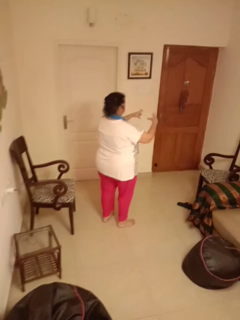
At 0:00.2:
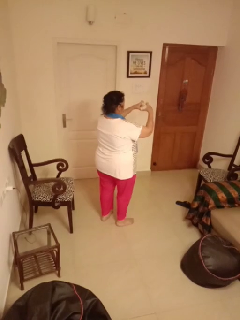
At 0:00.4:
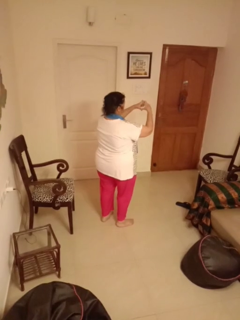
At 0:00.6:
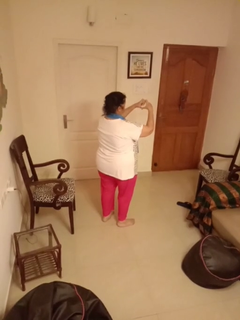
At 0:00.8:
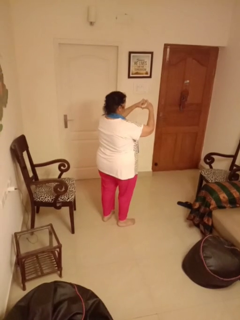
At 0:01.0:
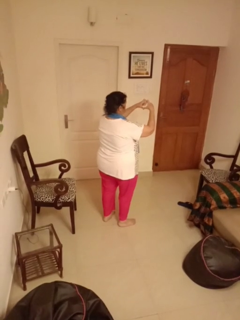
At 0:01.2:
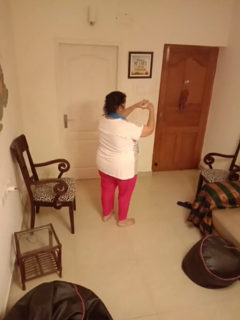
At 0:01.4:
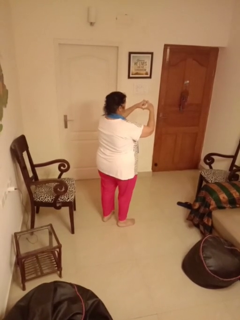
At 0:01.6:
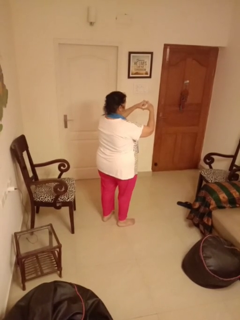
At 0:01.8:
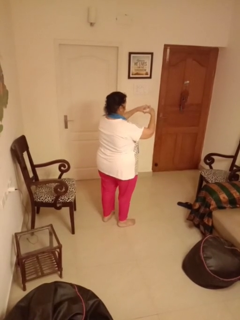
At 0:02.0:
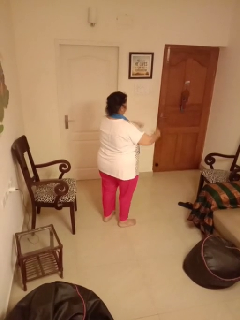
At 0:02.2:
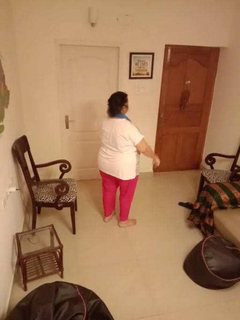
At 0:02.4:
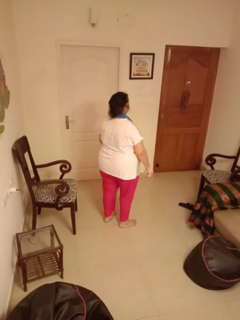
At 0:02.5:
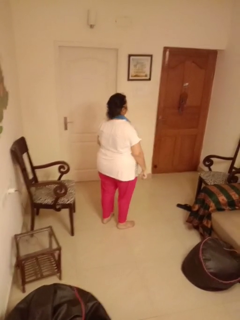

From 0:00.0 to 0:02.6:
person gestures heart

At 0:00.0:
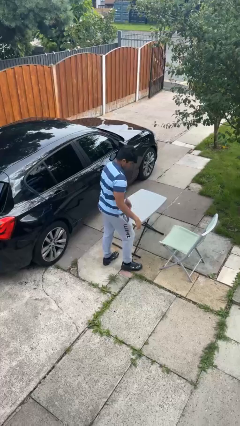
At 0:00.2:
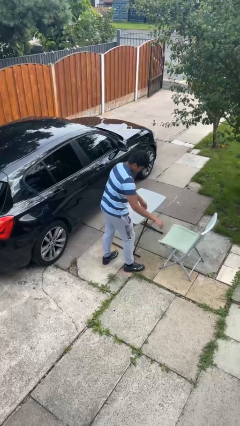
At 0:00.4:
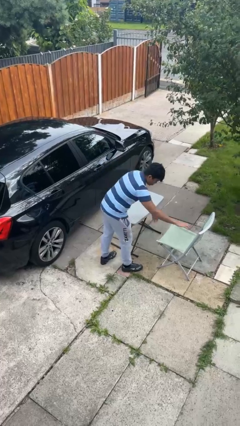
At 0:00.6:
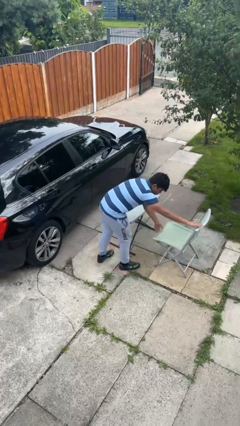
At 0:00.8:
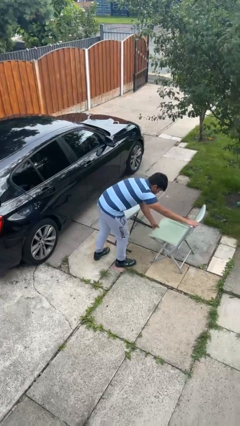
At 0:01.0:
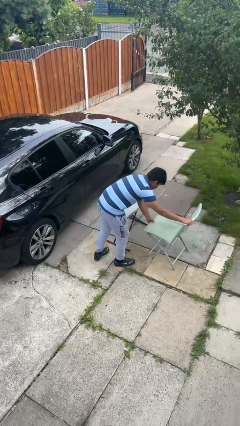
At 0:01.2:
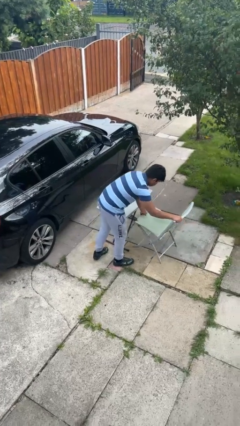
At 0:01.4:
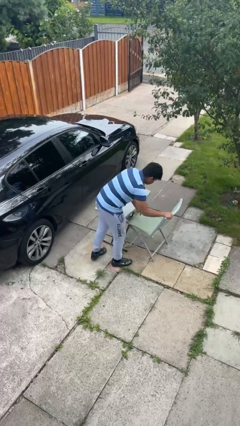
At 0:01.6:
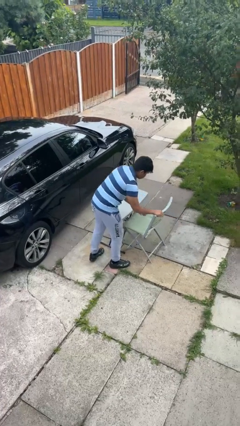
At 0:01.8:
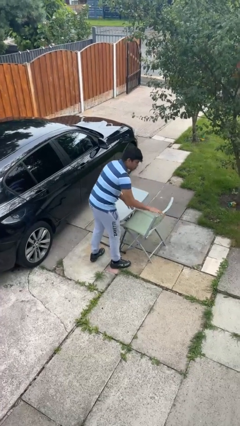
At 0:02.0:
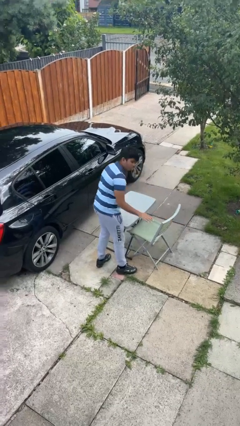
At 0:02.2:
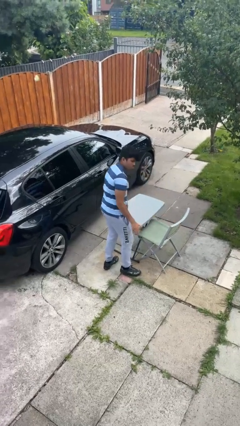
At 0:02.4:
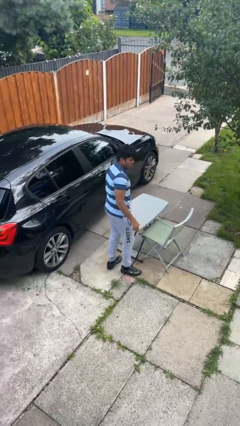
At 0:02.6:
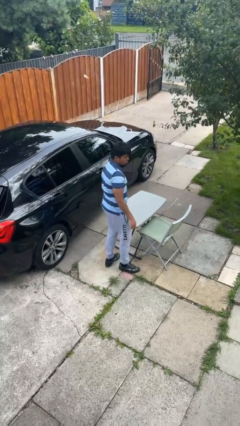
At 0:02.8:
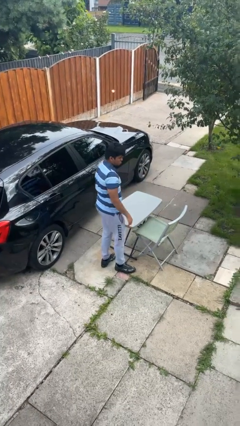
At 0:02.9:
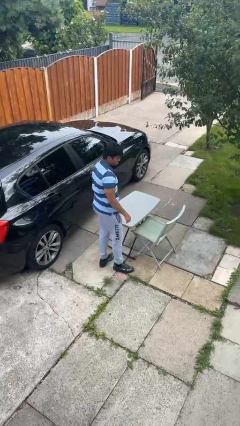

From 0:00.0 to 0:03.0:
person pushes in chair

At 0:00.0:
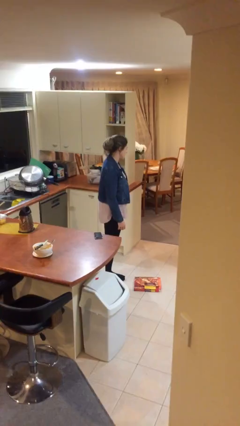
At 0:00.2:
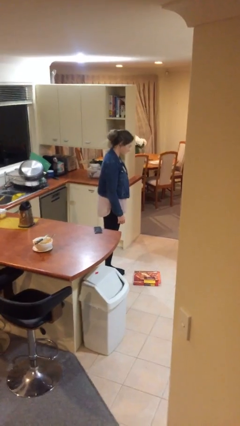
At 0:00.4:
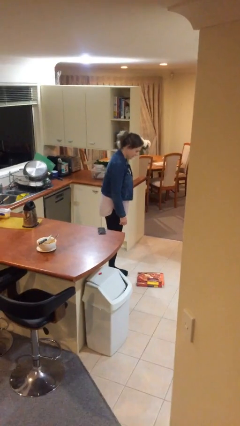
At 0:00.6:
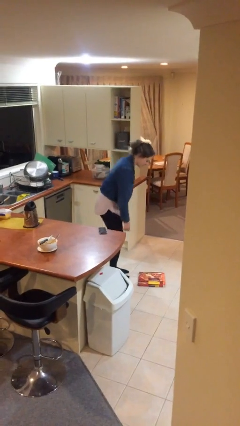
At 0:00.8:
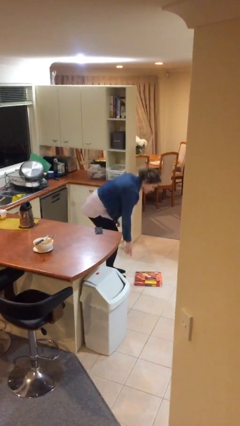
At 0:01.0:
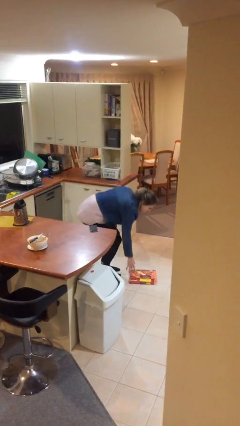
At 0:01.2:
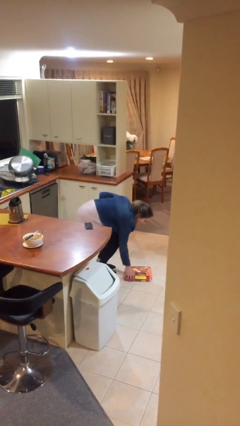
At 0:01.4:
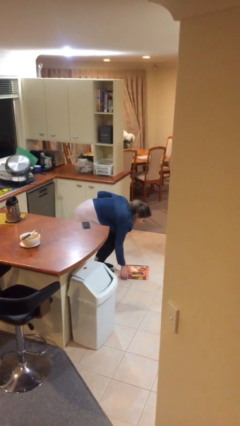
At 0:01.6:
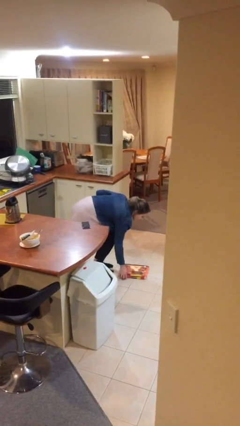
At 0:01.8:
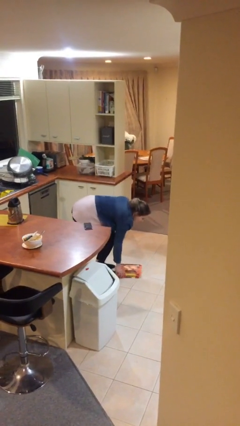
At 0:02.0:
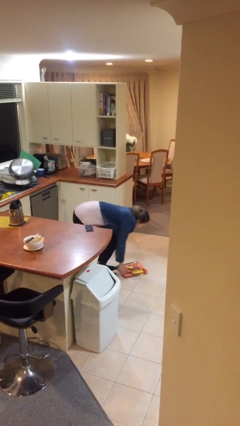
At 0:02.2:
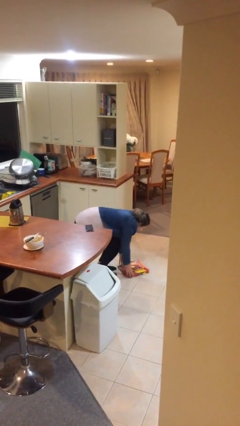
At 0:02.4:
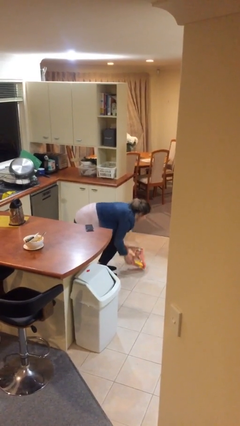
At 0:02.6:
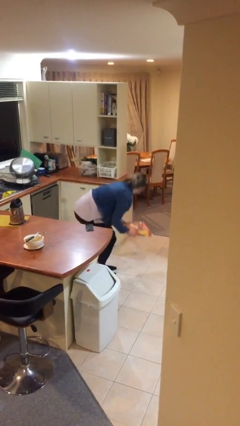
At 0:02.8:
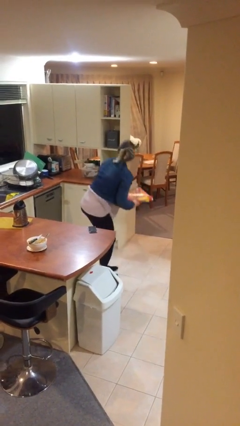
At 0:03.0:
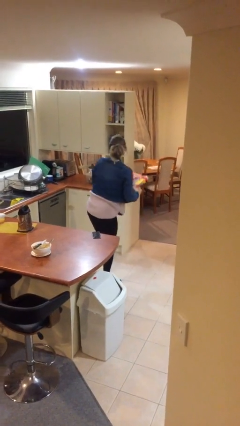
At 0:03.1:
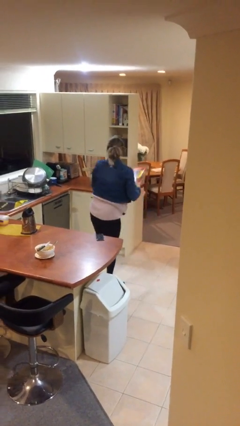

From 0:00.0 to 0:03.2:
person picks up object from floor

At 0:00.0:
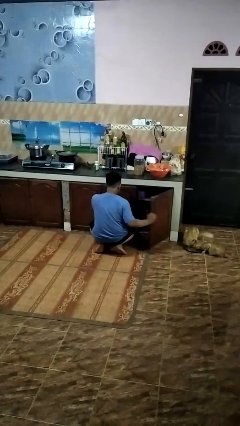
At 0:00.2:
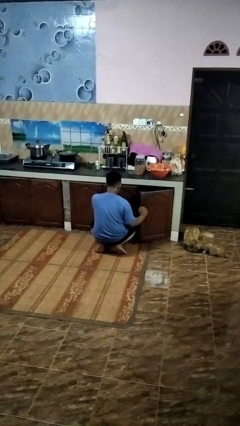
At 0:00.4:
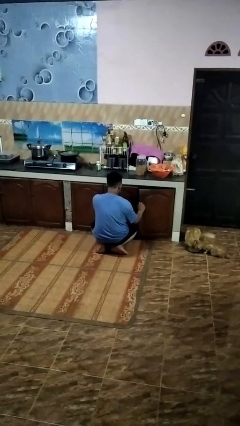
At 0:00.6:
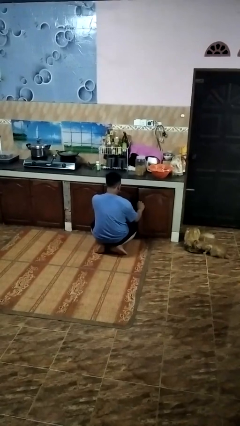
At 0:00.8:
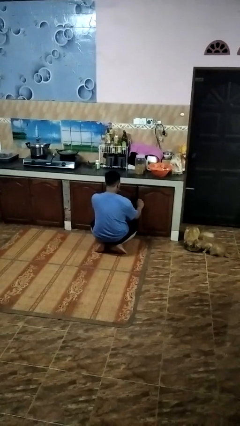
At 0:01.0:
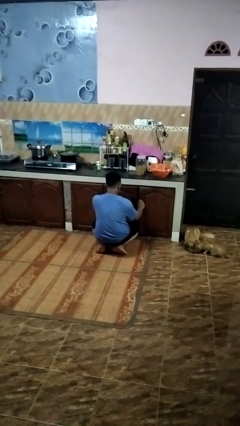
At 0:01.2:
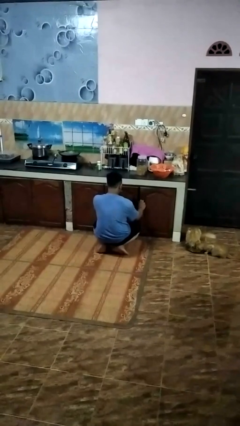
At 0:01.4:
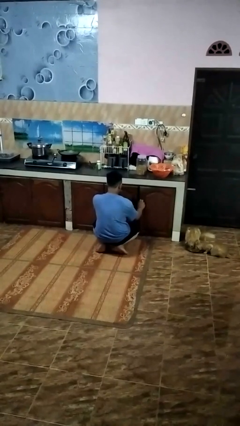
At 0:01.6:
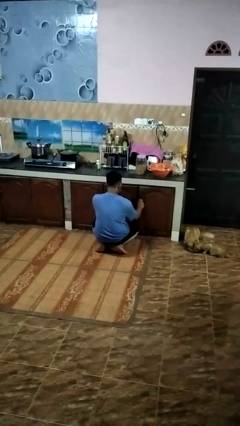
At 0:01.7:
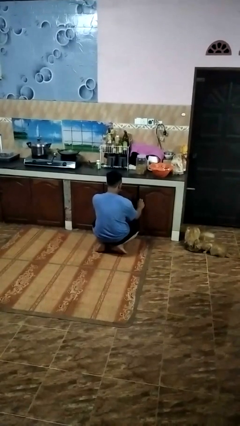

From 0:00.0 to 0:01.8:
person closes kitchen drawer

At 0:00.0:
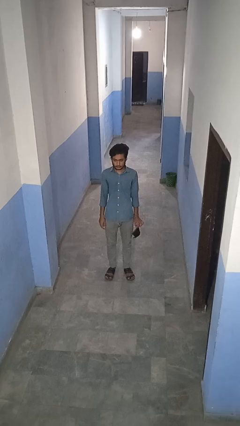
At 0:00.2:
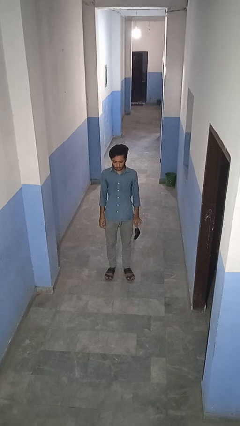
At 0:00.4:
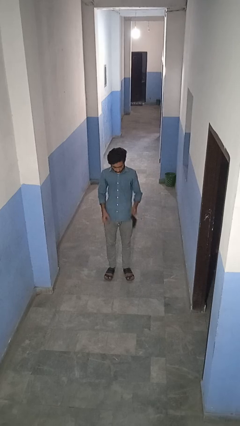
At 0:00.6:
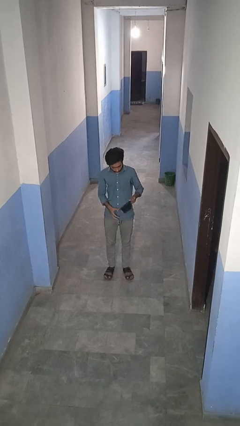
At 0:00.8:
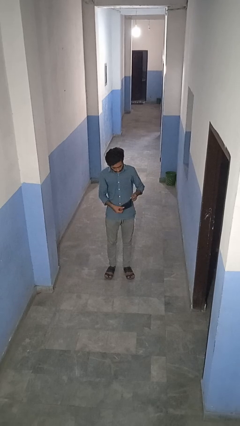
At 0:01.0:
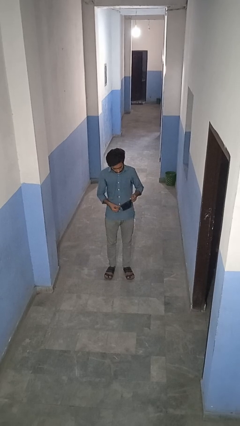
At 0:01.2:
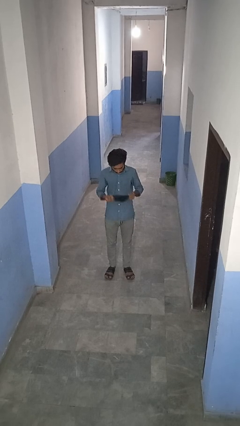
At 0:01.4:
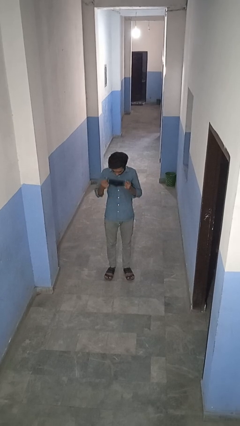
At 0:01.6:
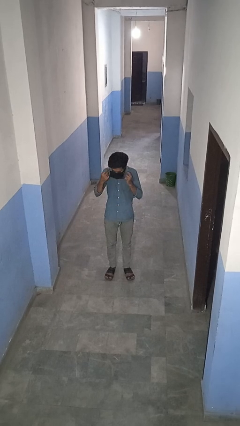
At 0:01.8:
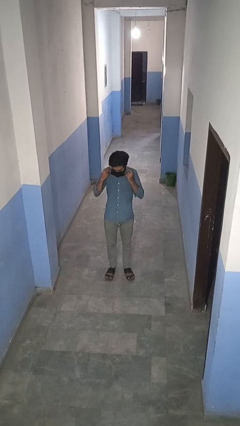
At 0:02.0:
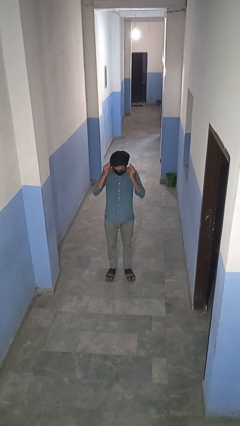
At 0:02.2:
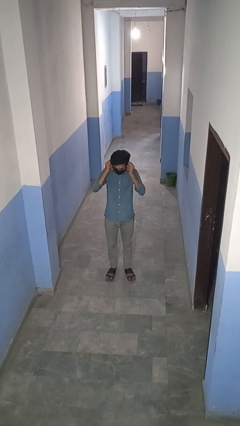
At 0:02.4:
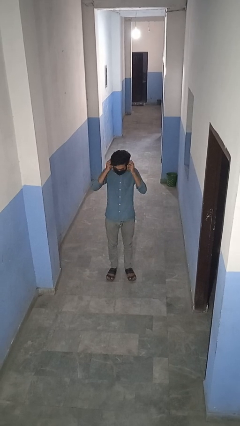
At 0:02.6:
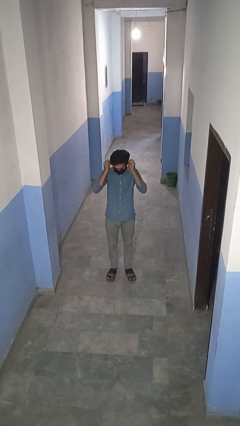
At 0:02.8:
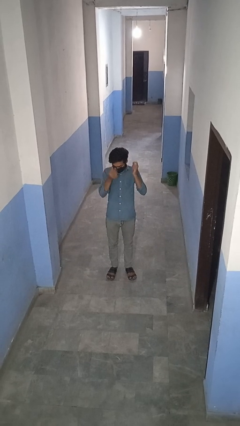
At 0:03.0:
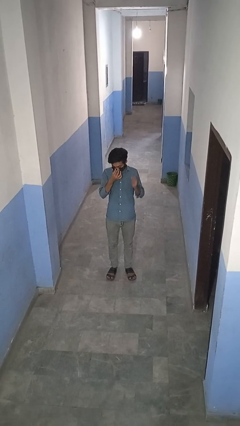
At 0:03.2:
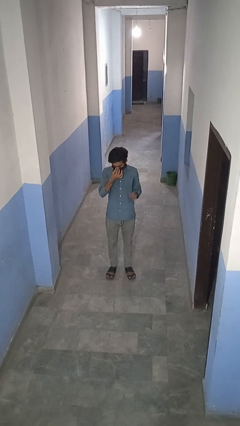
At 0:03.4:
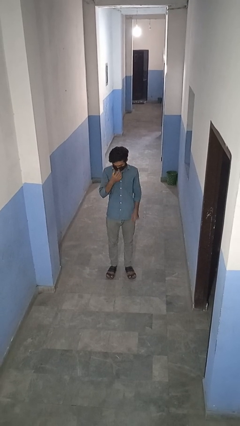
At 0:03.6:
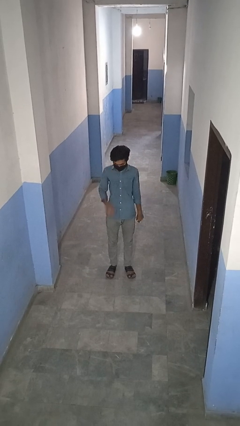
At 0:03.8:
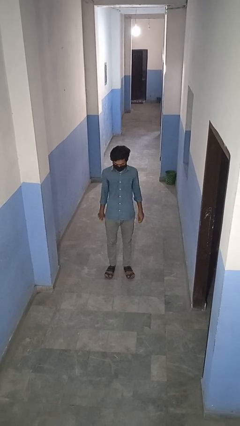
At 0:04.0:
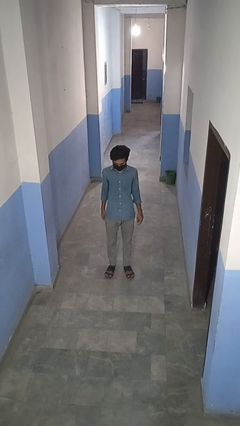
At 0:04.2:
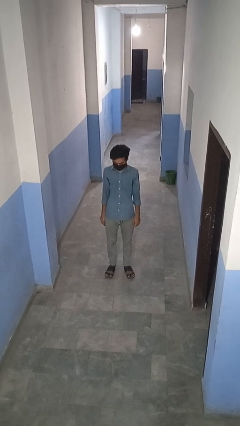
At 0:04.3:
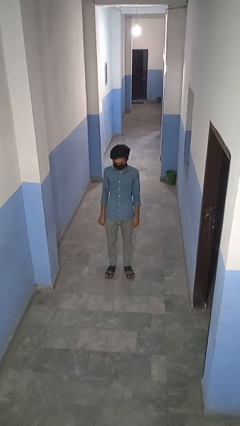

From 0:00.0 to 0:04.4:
person puts on facemask

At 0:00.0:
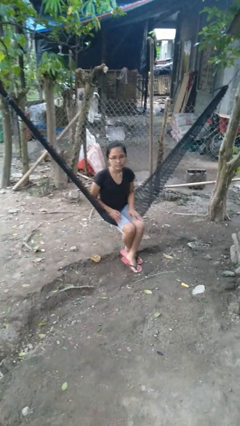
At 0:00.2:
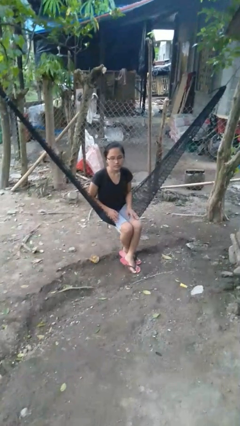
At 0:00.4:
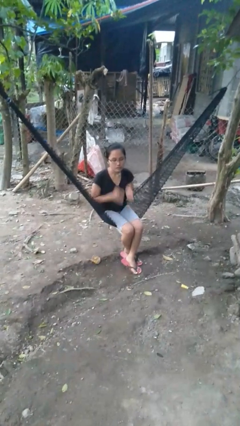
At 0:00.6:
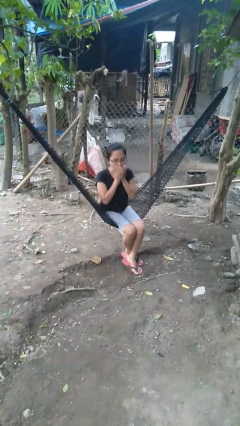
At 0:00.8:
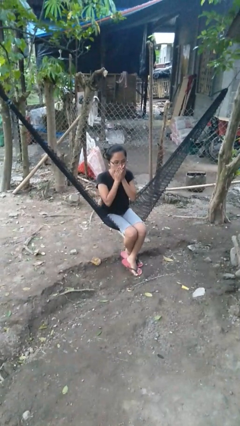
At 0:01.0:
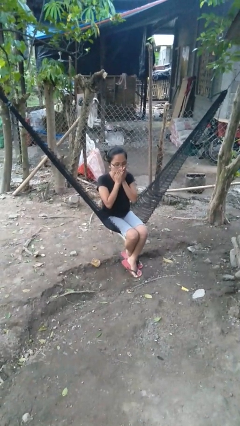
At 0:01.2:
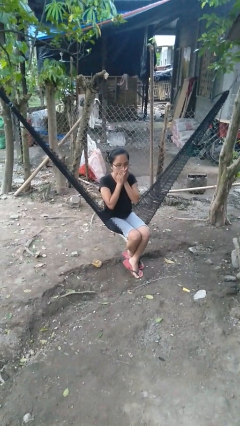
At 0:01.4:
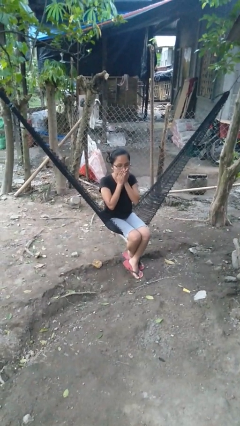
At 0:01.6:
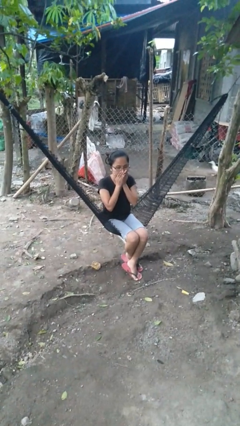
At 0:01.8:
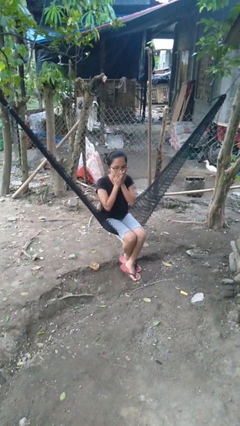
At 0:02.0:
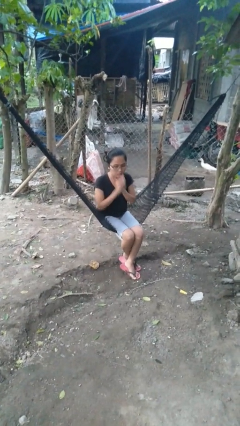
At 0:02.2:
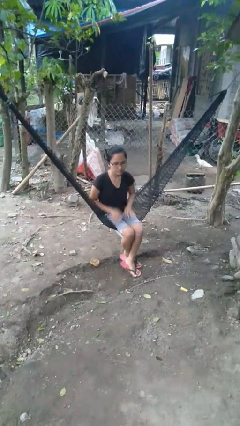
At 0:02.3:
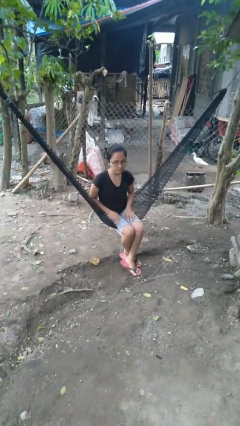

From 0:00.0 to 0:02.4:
person blows into hands
